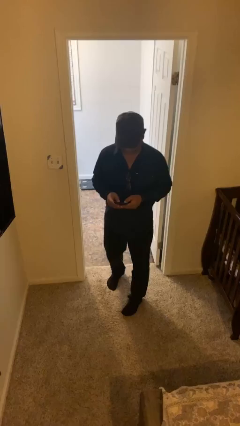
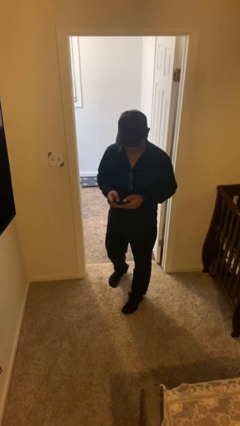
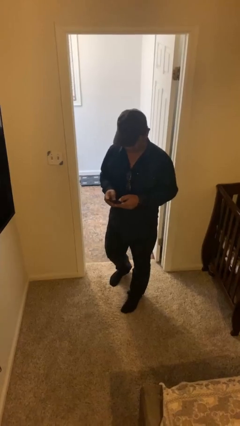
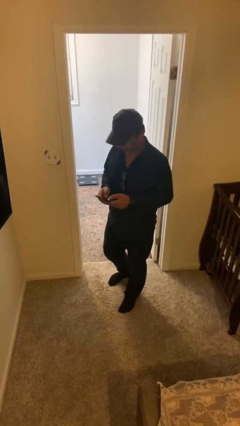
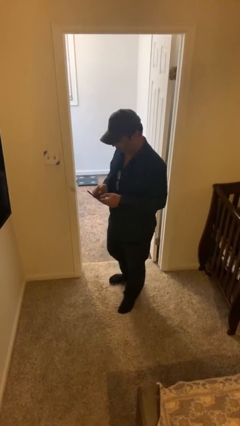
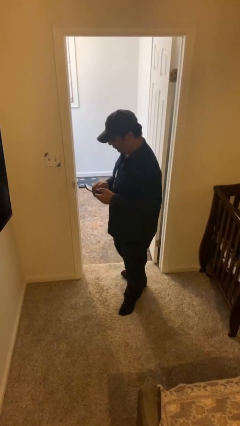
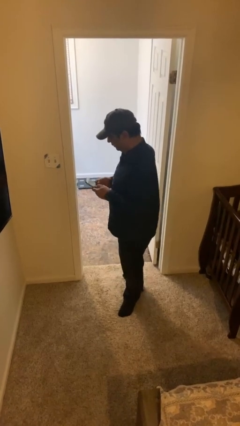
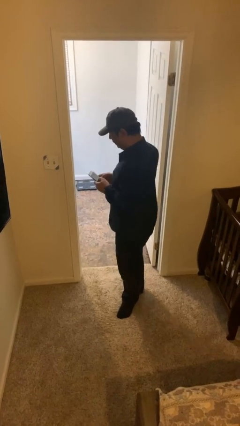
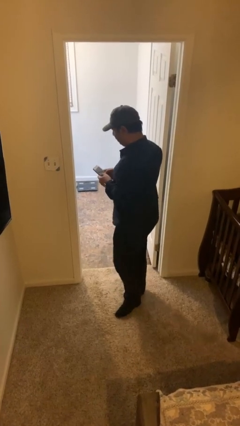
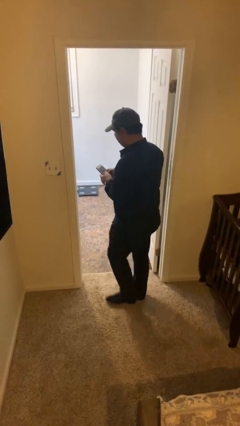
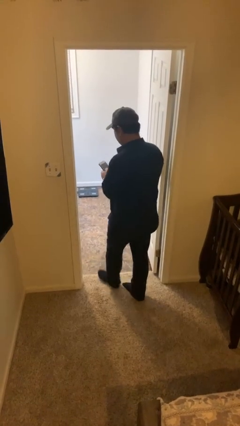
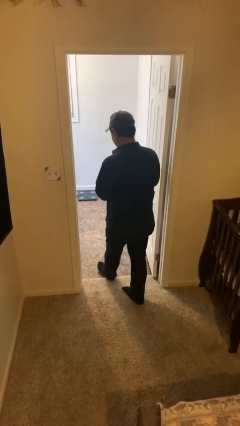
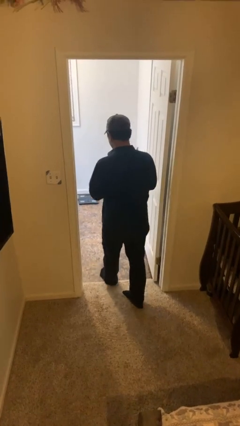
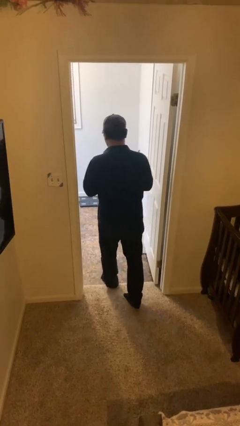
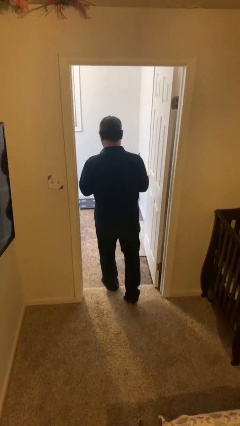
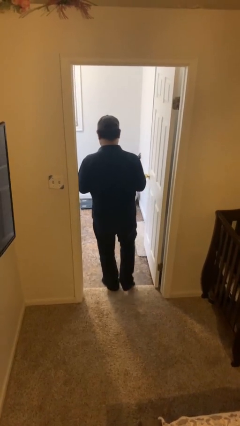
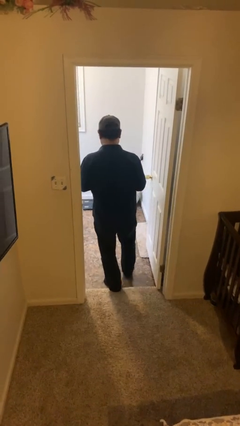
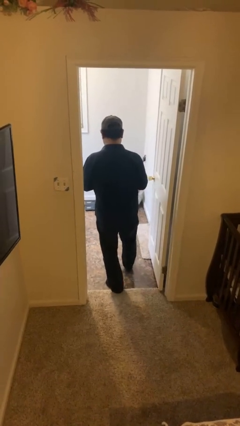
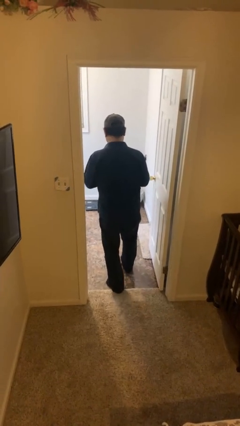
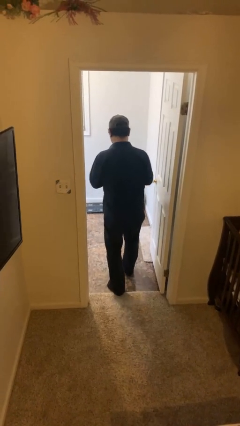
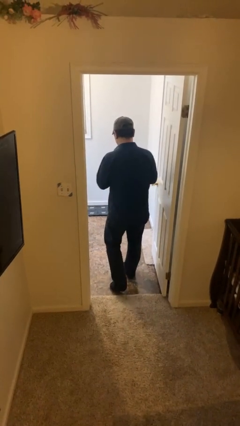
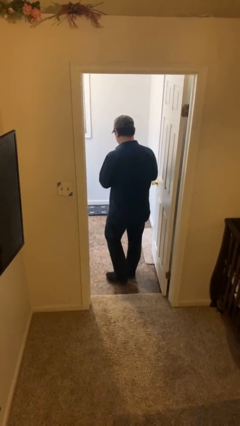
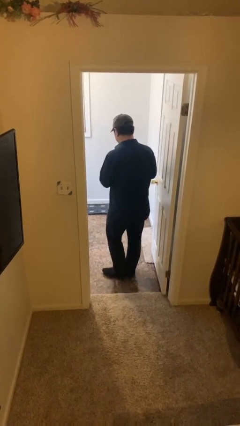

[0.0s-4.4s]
person exits scene through structure

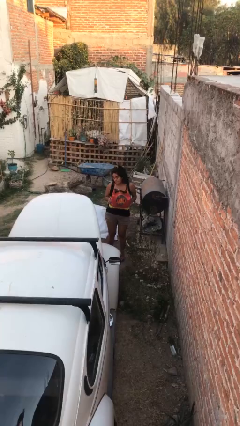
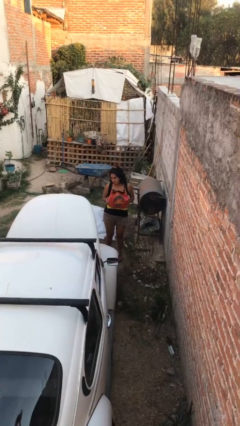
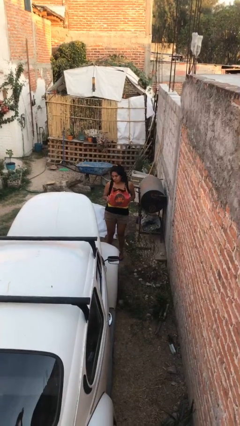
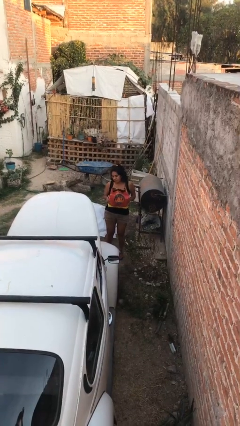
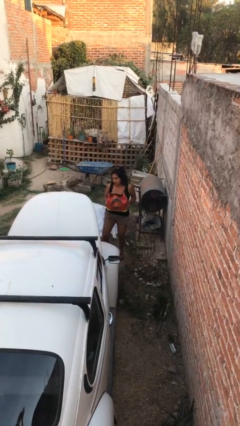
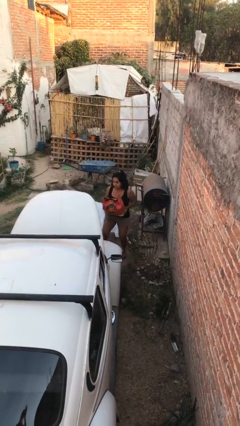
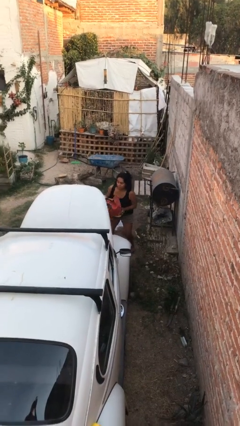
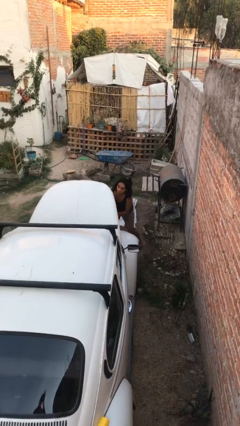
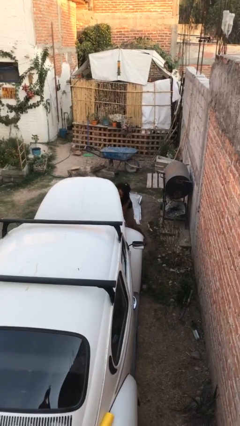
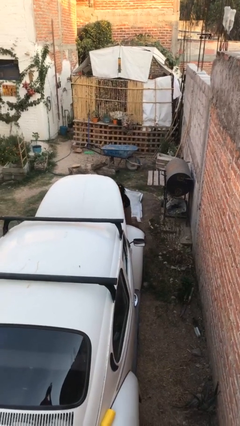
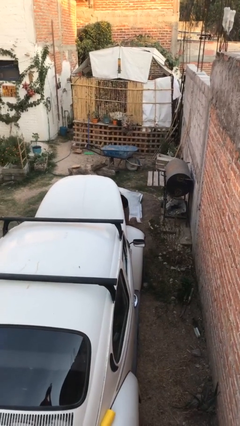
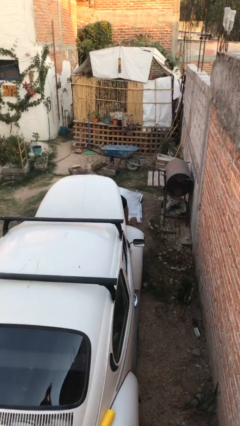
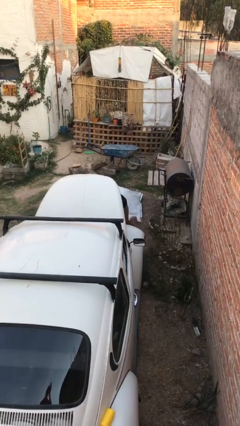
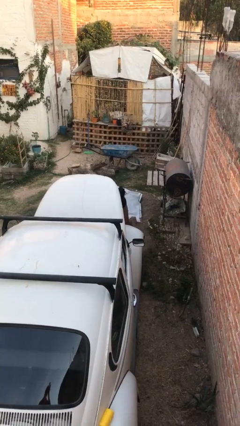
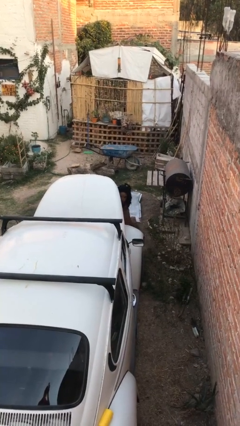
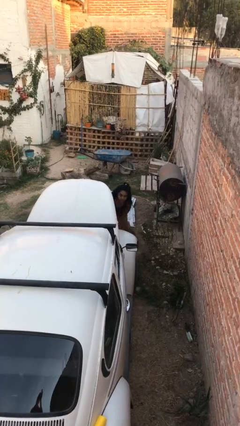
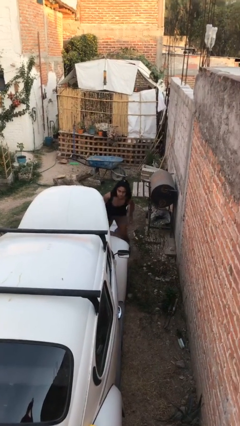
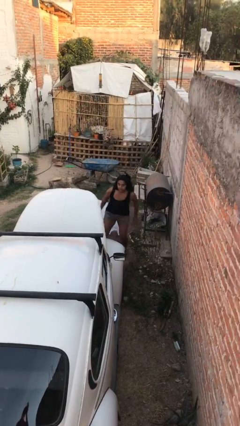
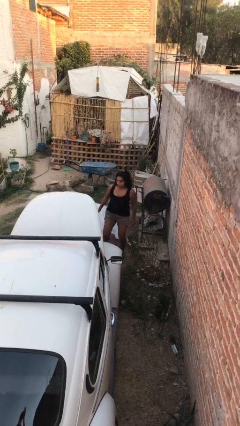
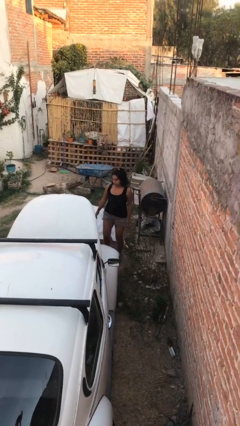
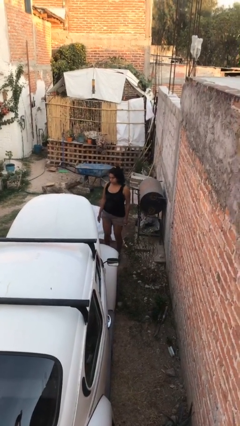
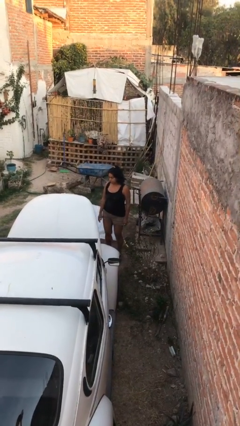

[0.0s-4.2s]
person loads car

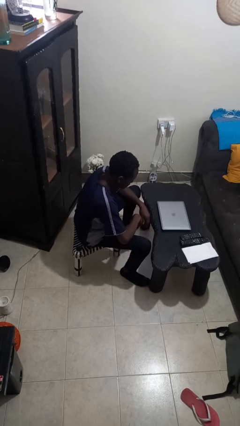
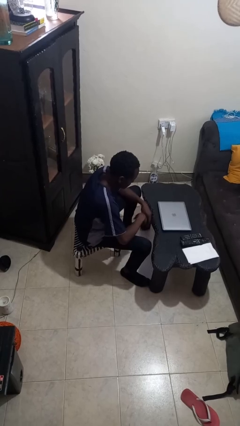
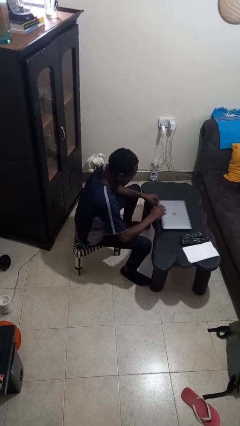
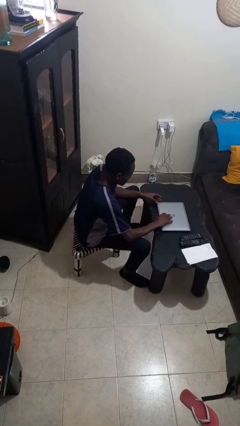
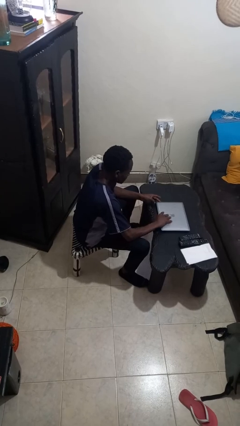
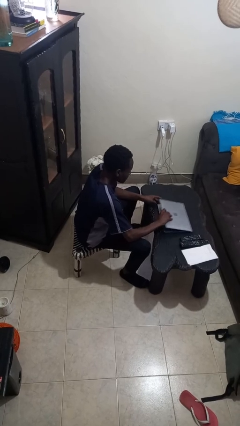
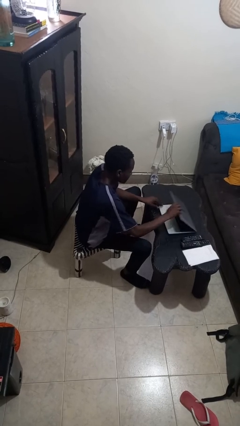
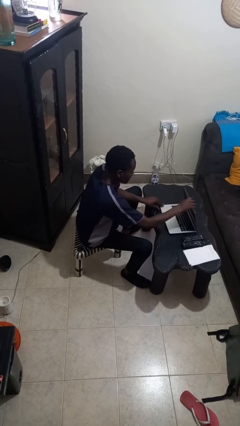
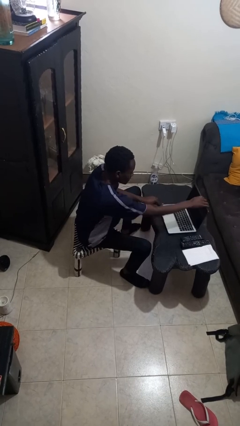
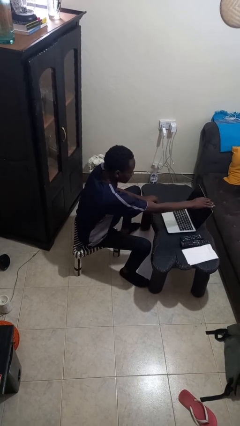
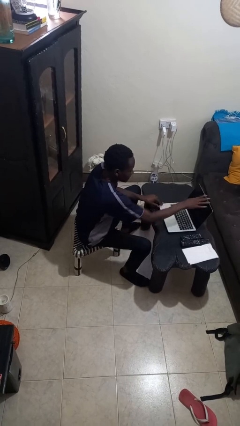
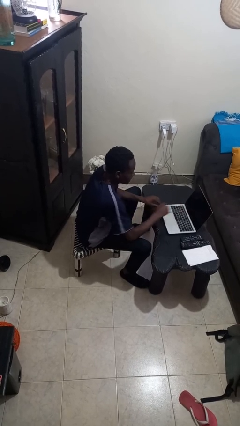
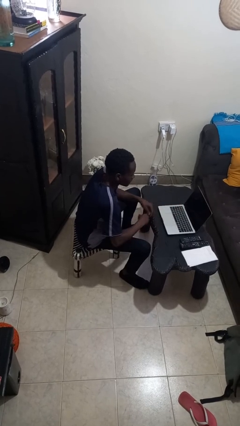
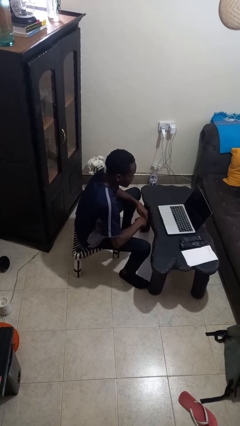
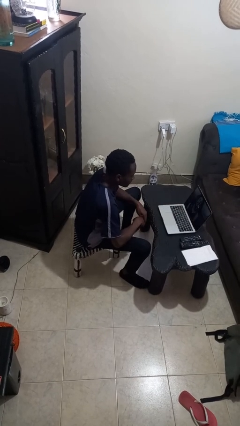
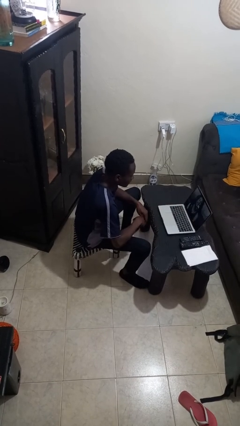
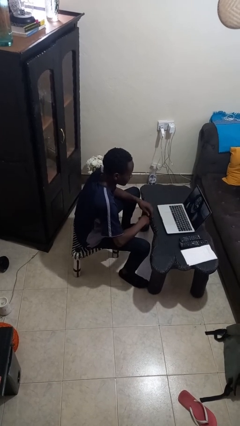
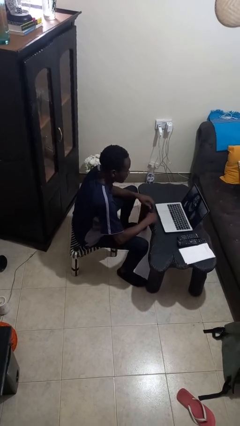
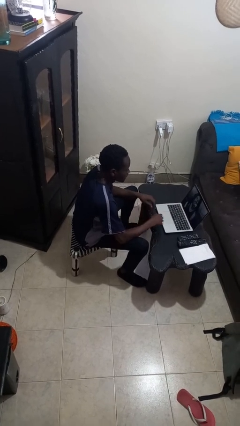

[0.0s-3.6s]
person opens laptop

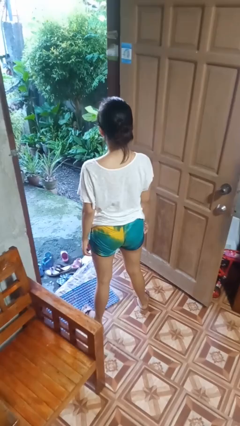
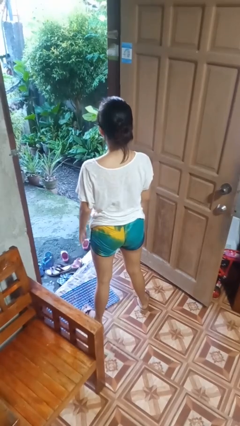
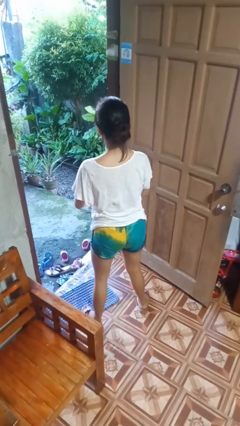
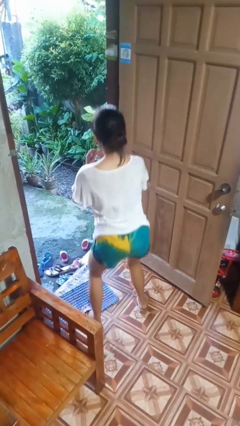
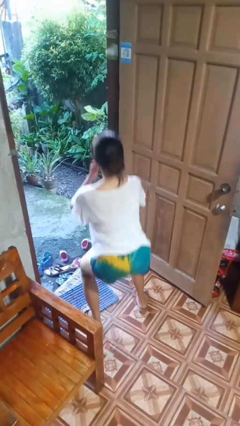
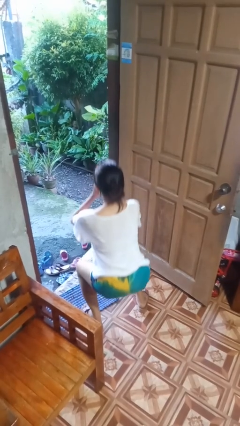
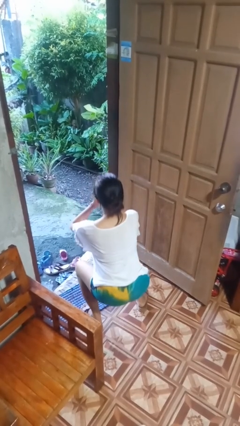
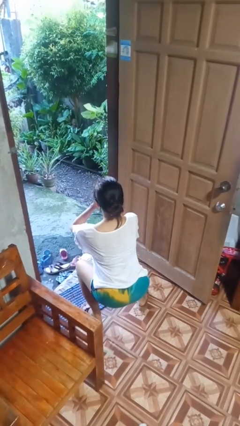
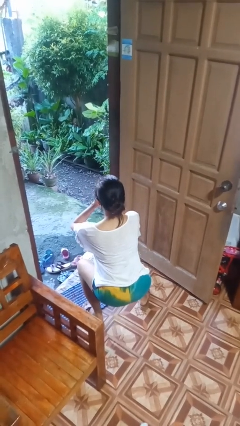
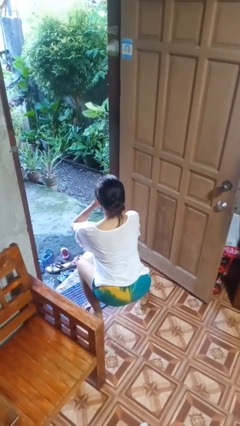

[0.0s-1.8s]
person squats

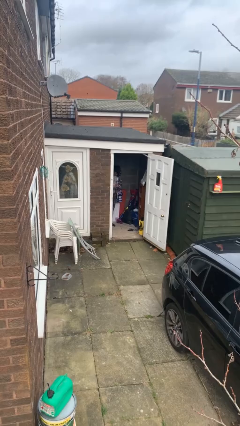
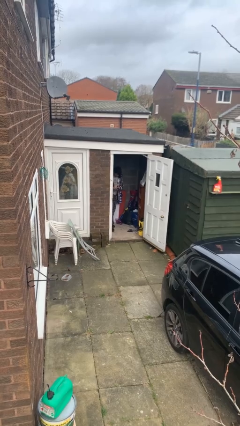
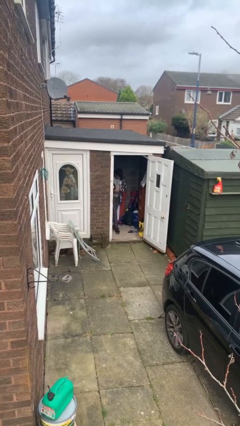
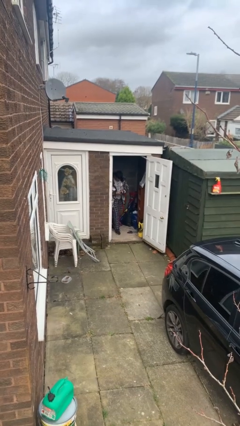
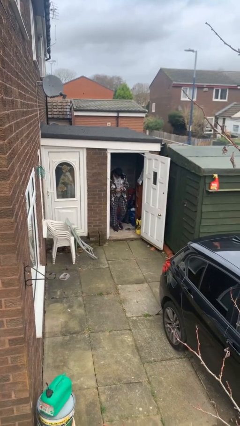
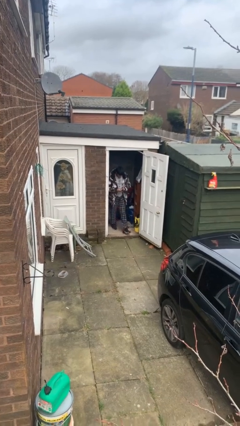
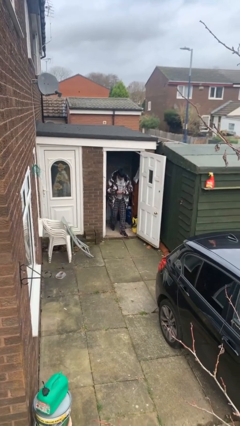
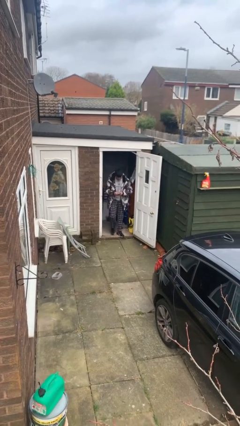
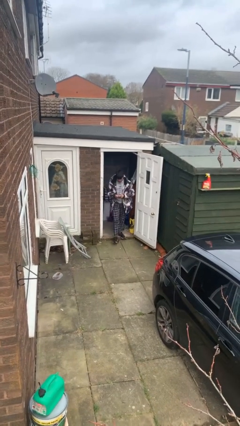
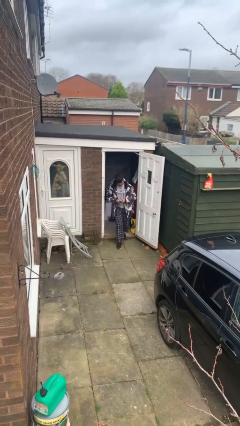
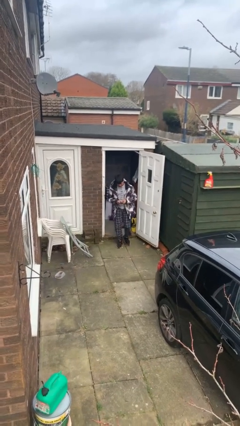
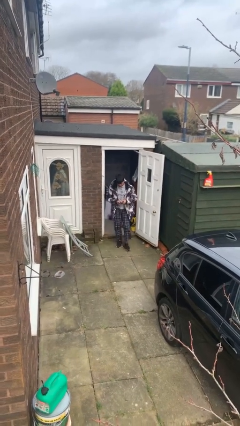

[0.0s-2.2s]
person enters scene through structure

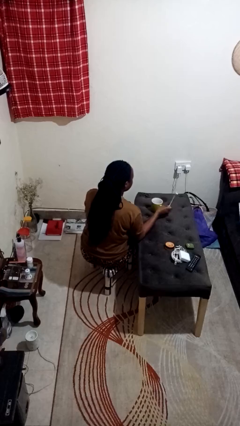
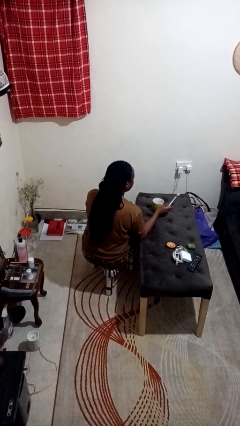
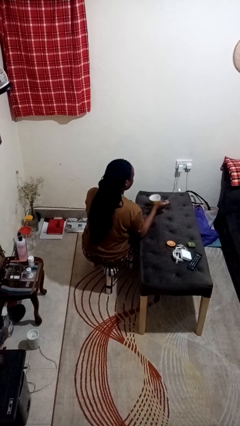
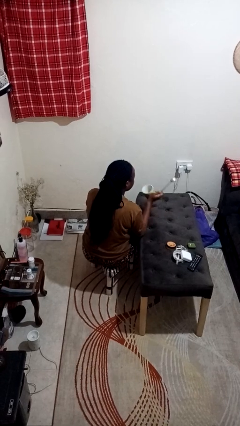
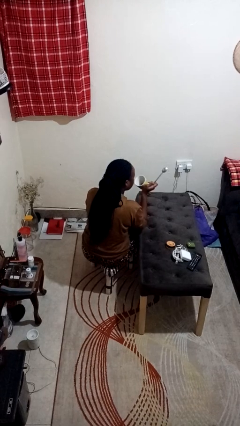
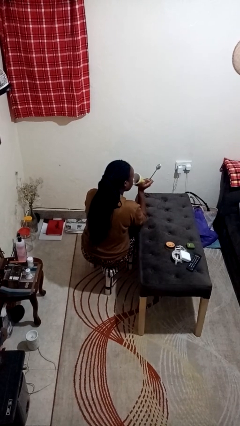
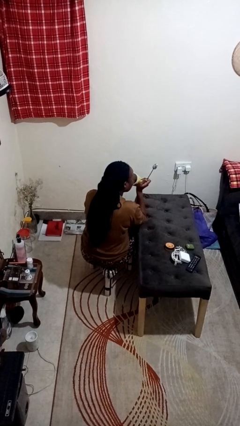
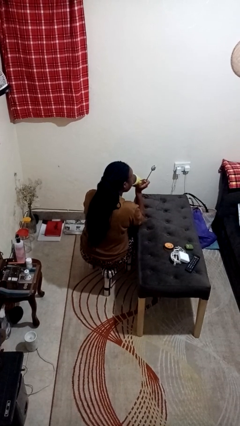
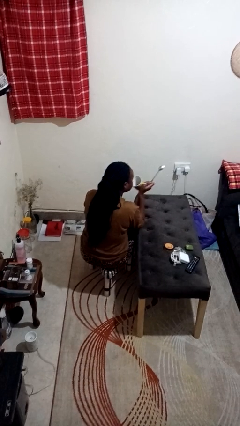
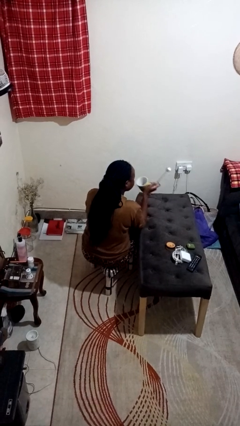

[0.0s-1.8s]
person drinks from mug
